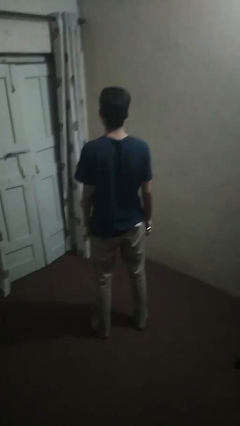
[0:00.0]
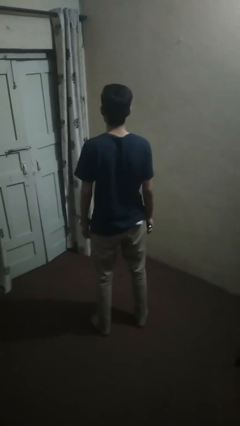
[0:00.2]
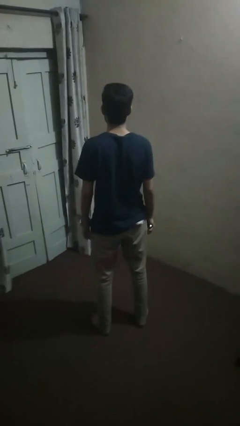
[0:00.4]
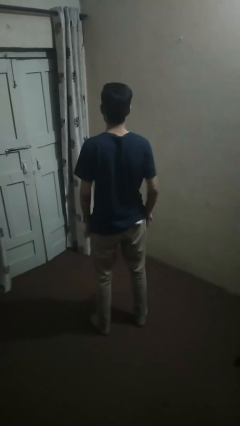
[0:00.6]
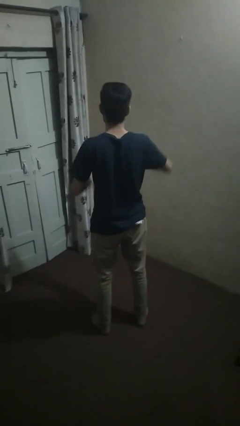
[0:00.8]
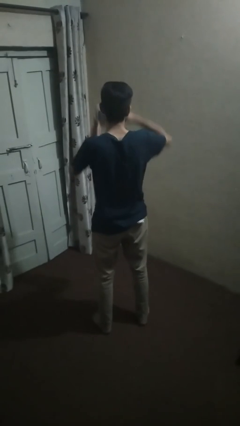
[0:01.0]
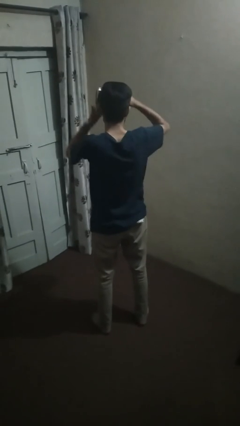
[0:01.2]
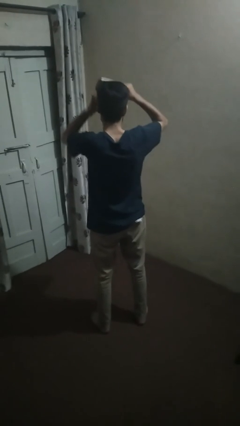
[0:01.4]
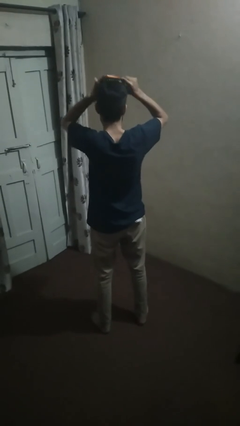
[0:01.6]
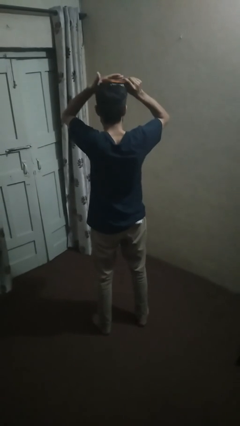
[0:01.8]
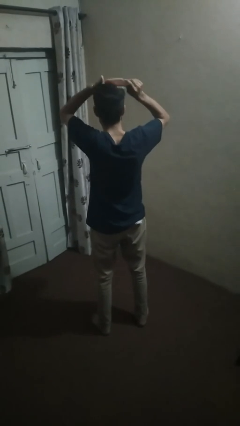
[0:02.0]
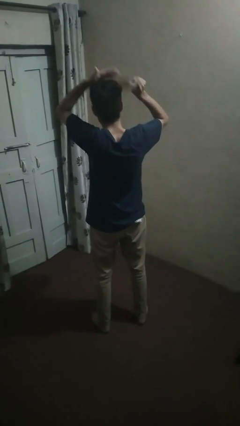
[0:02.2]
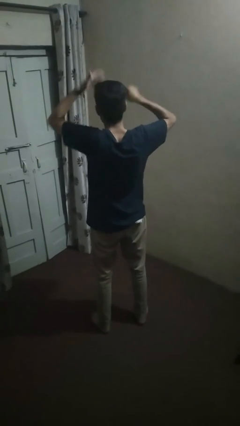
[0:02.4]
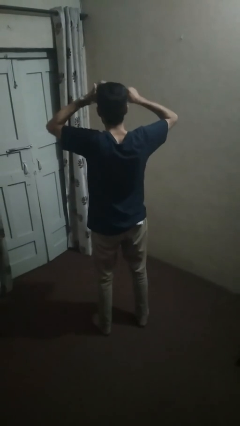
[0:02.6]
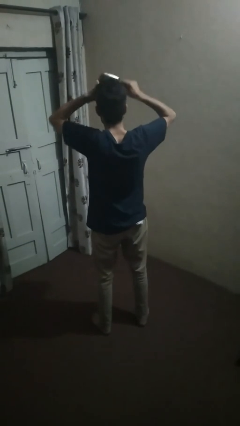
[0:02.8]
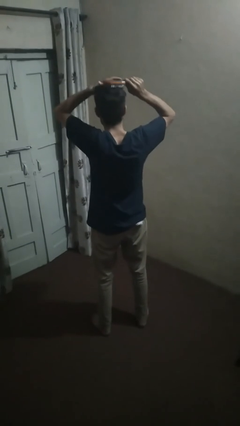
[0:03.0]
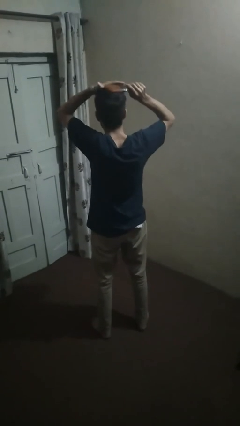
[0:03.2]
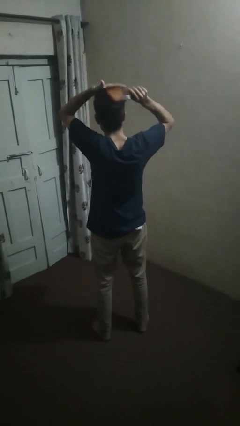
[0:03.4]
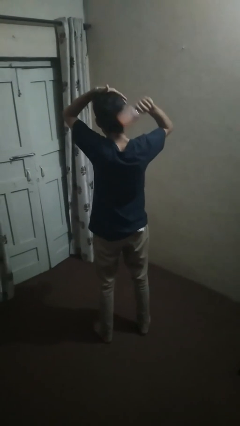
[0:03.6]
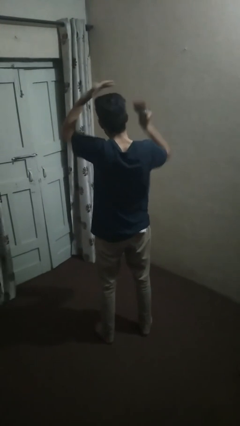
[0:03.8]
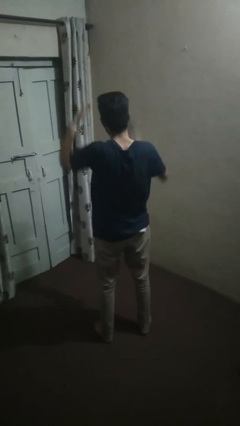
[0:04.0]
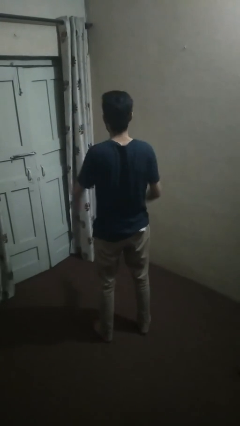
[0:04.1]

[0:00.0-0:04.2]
person brushes hair

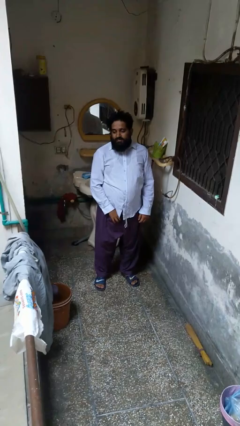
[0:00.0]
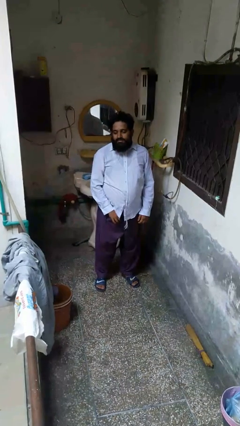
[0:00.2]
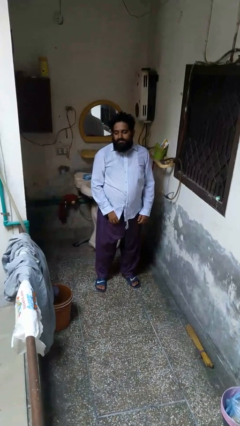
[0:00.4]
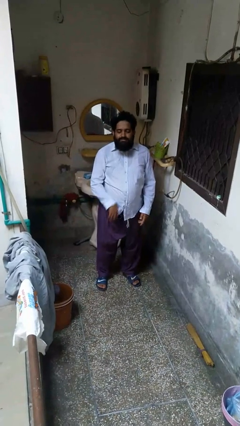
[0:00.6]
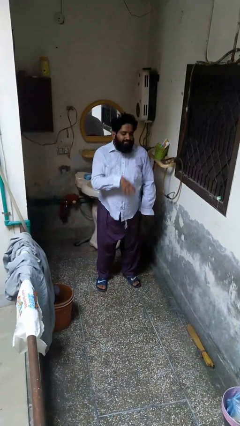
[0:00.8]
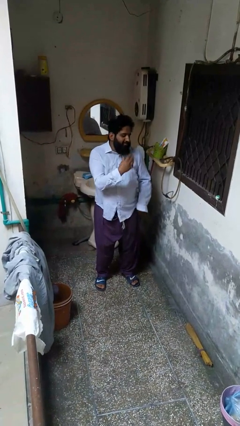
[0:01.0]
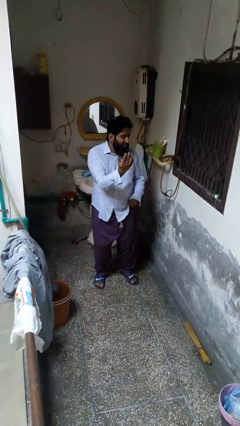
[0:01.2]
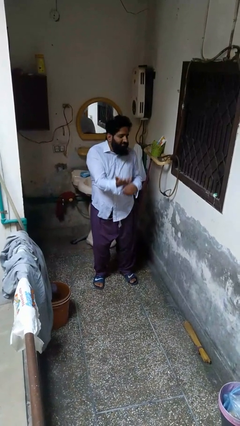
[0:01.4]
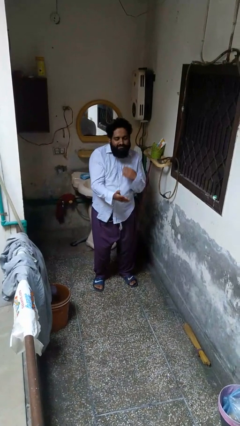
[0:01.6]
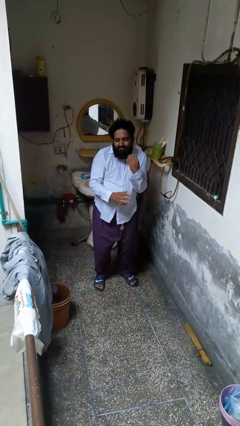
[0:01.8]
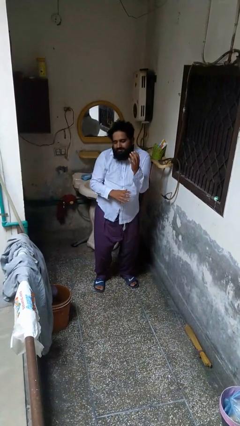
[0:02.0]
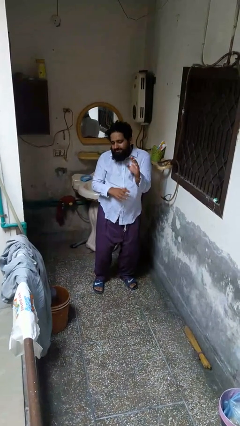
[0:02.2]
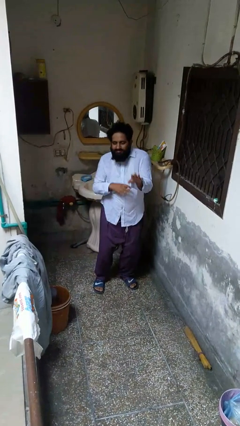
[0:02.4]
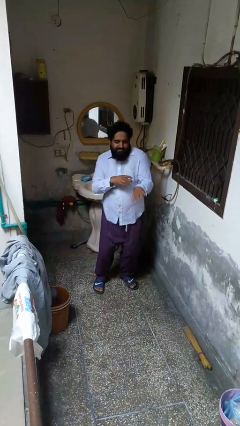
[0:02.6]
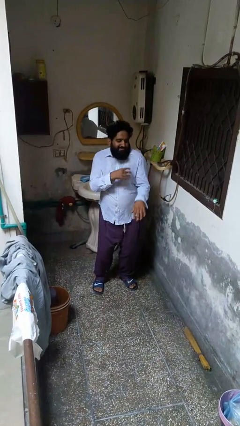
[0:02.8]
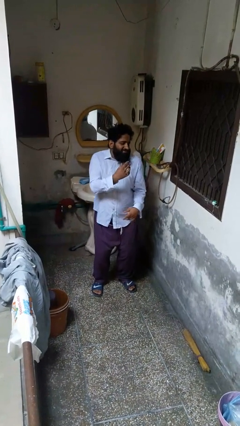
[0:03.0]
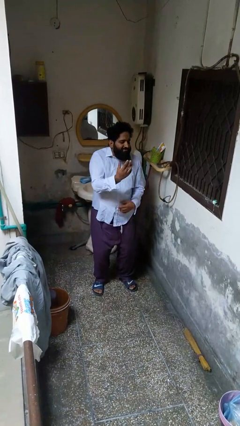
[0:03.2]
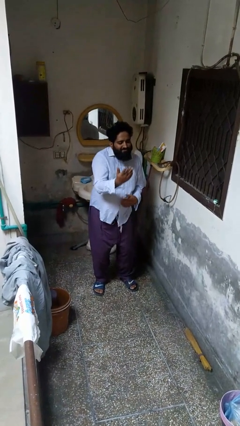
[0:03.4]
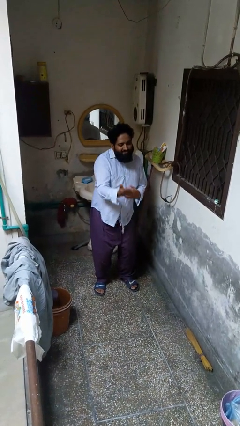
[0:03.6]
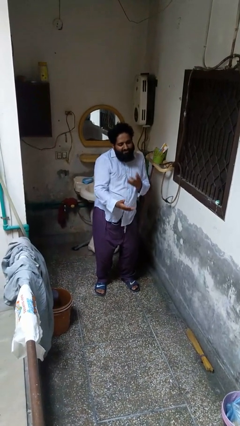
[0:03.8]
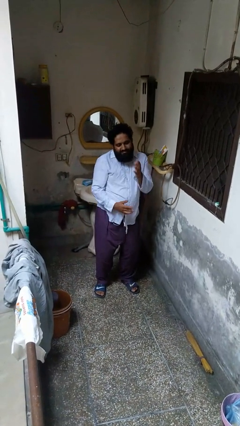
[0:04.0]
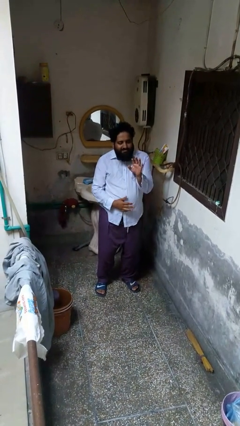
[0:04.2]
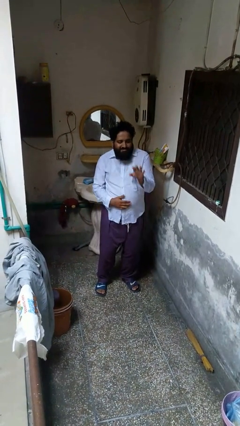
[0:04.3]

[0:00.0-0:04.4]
person dances in place

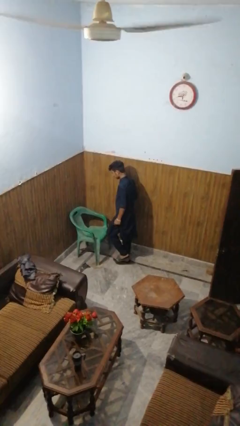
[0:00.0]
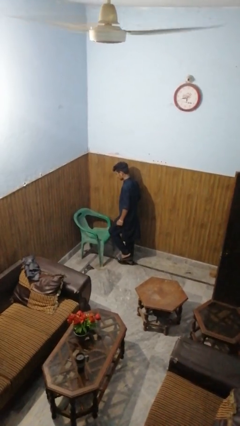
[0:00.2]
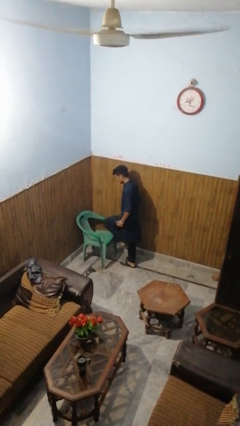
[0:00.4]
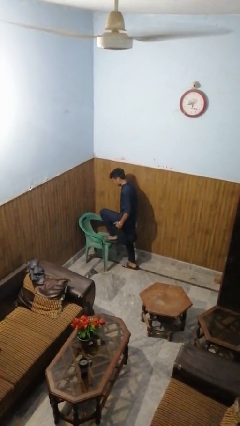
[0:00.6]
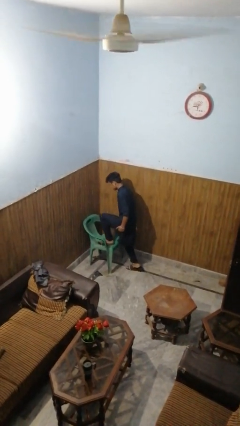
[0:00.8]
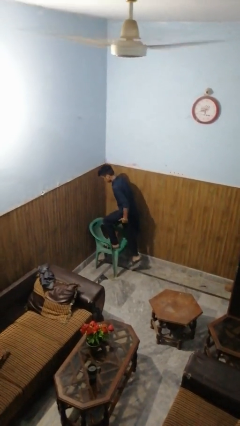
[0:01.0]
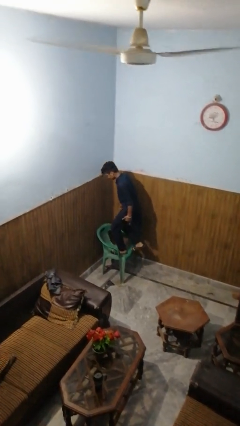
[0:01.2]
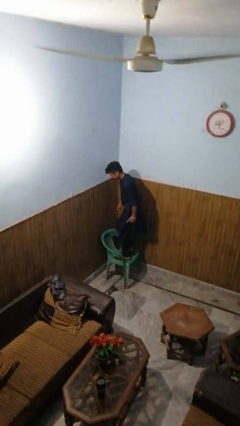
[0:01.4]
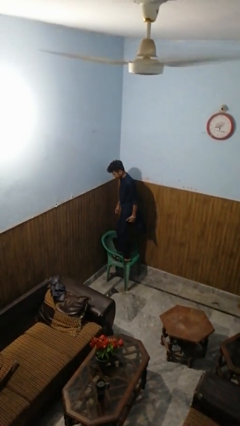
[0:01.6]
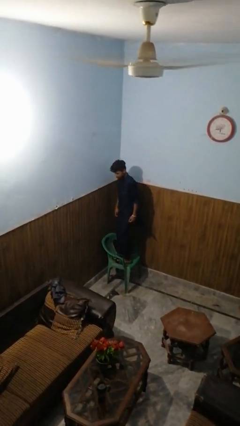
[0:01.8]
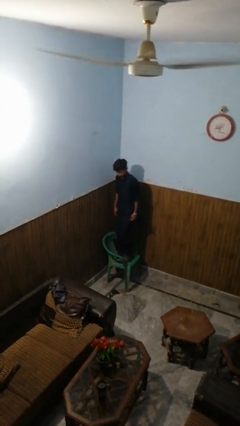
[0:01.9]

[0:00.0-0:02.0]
person climbs on chair

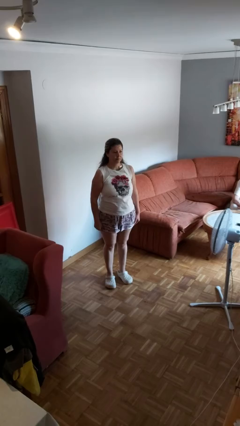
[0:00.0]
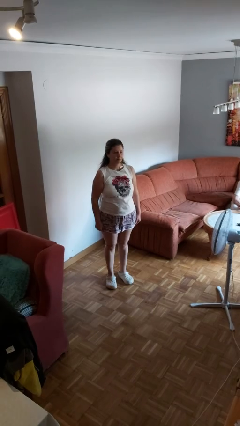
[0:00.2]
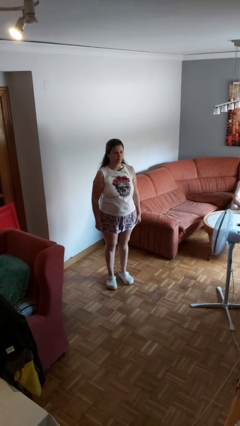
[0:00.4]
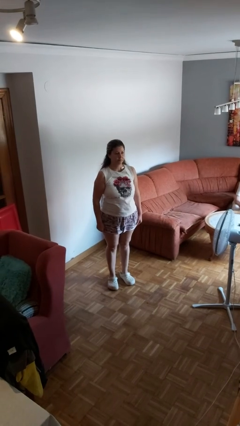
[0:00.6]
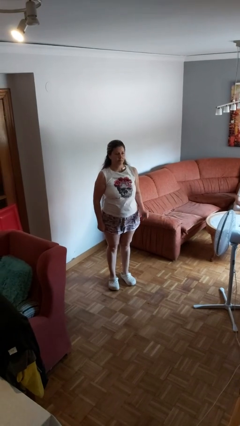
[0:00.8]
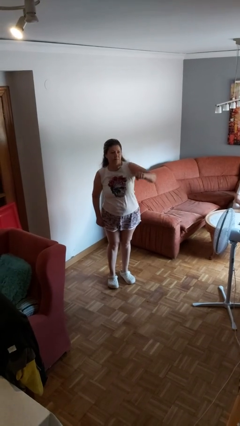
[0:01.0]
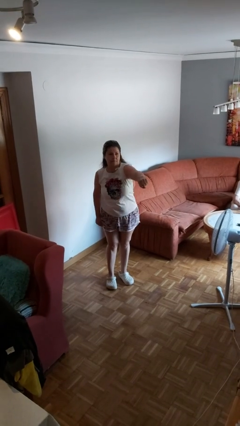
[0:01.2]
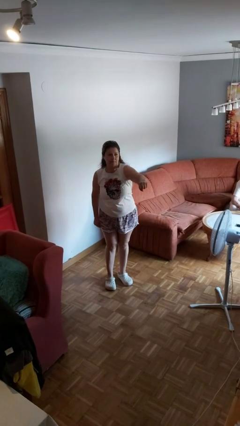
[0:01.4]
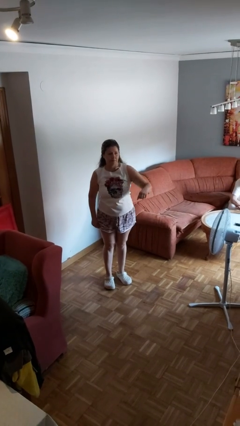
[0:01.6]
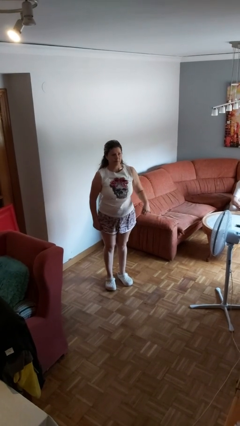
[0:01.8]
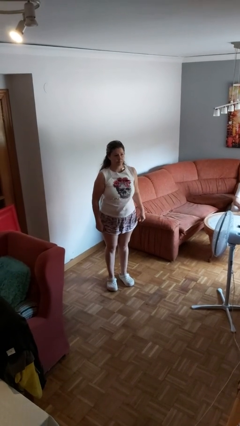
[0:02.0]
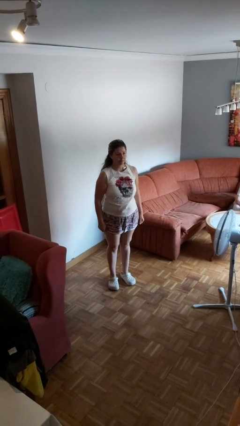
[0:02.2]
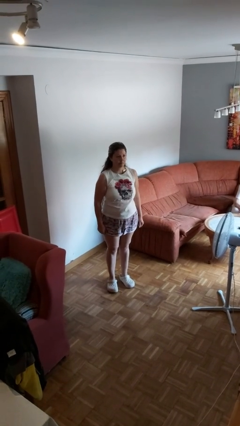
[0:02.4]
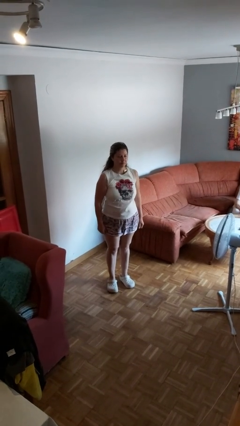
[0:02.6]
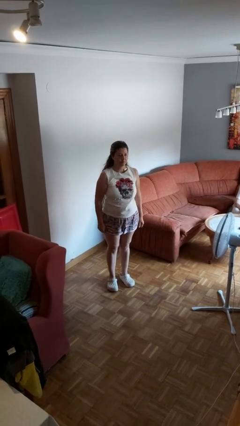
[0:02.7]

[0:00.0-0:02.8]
person karate chop

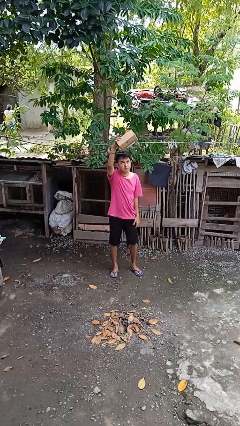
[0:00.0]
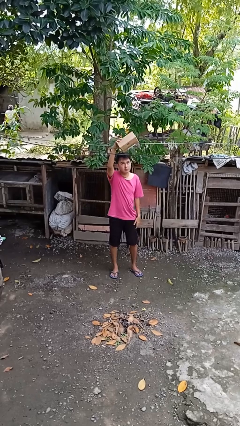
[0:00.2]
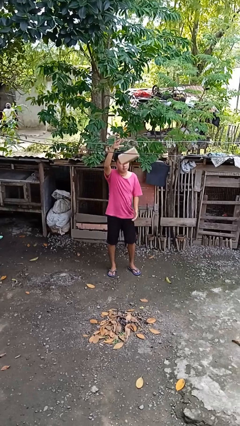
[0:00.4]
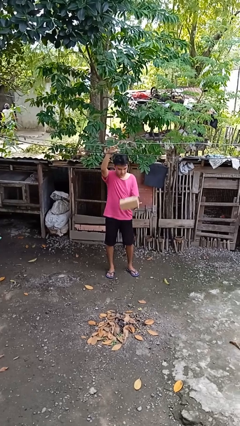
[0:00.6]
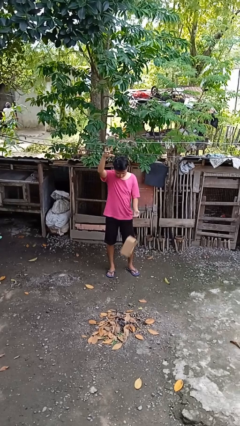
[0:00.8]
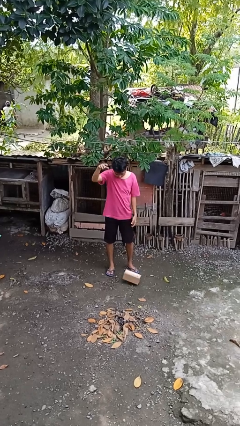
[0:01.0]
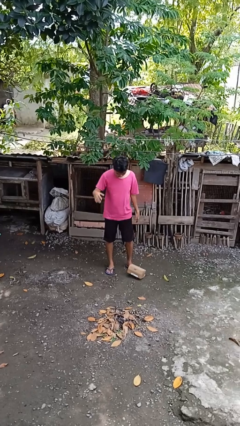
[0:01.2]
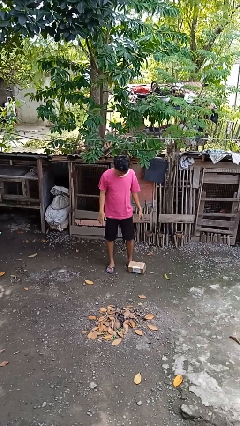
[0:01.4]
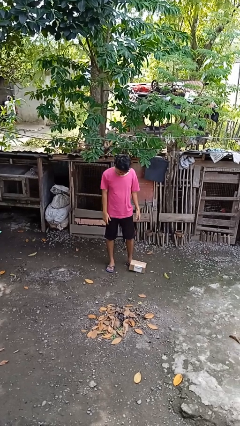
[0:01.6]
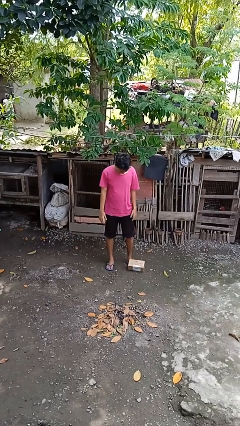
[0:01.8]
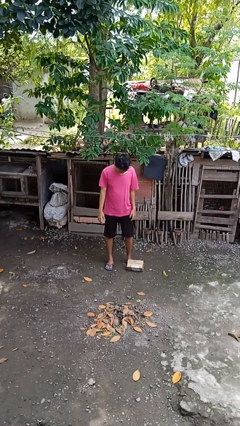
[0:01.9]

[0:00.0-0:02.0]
person drops object

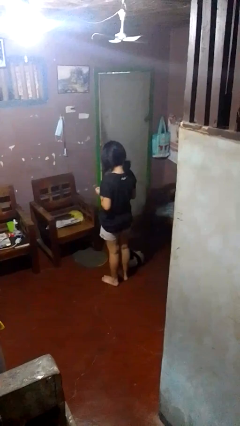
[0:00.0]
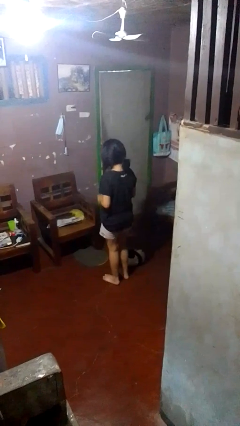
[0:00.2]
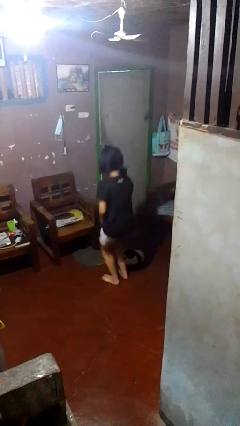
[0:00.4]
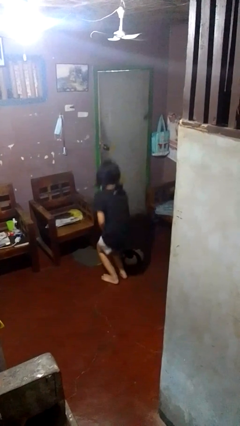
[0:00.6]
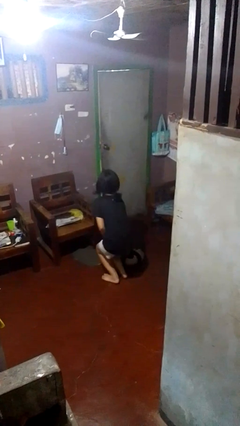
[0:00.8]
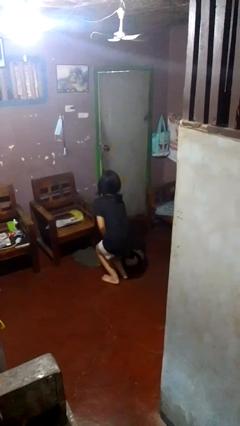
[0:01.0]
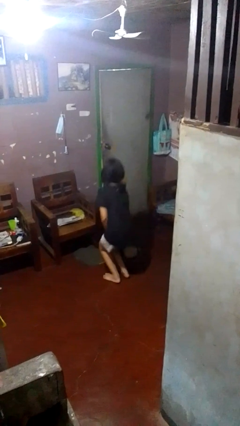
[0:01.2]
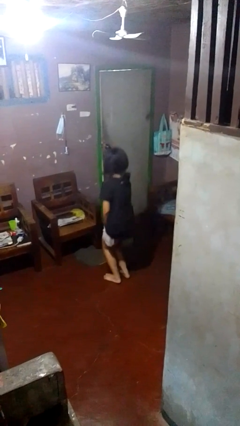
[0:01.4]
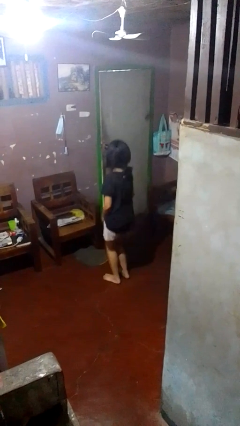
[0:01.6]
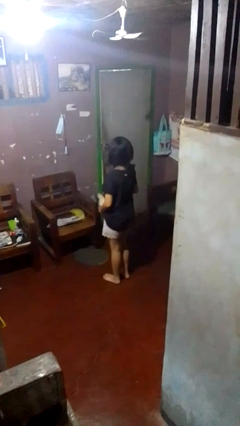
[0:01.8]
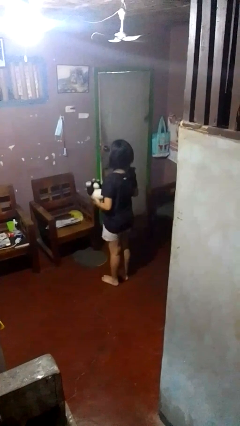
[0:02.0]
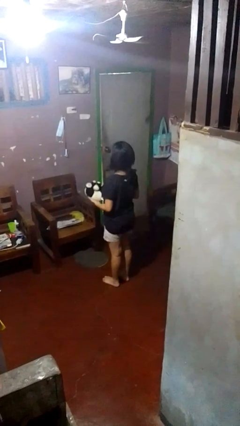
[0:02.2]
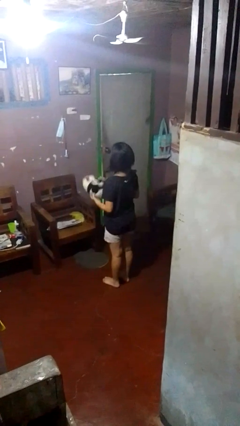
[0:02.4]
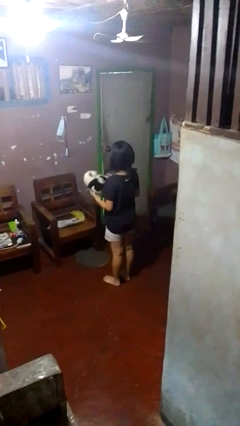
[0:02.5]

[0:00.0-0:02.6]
person picks up object from floor
